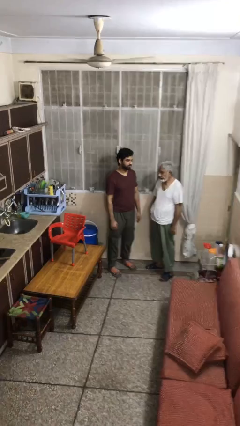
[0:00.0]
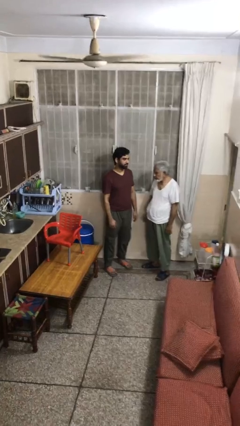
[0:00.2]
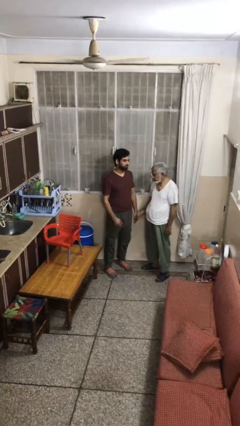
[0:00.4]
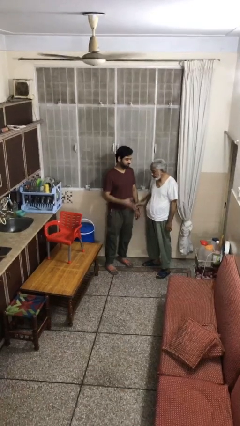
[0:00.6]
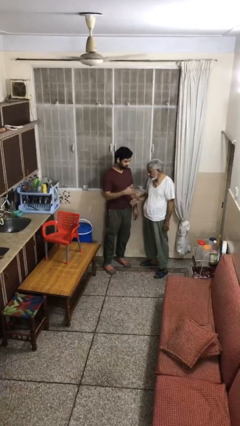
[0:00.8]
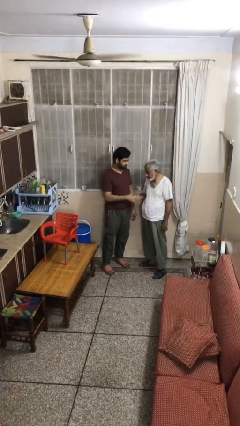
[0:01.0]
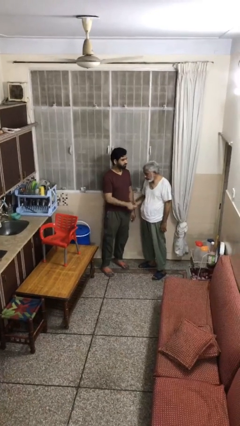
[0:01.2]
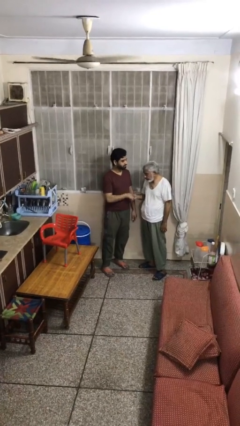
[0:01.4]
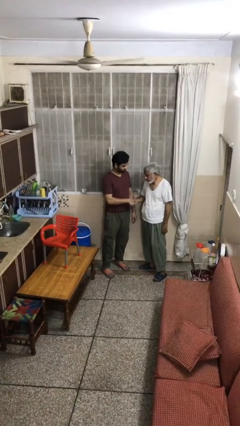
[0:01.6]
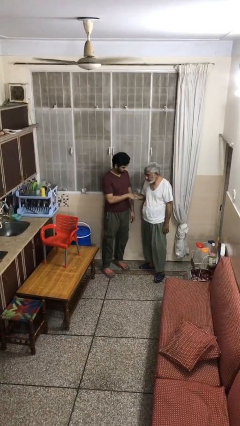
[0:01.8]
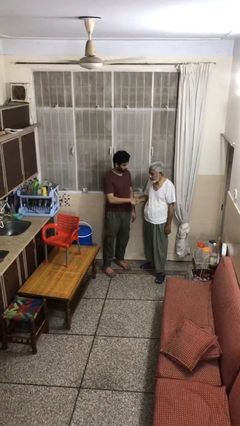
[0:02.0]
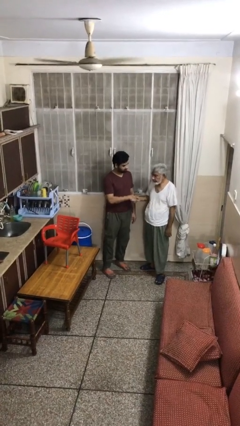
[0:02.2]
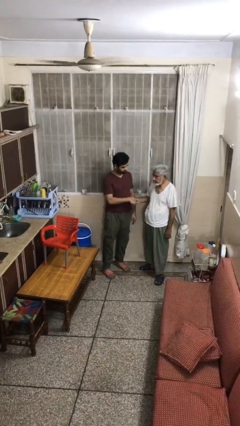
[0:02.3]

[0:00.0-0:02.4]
person shakes hand

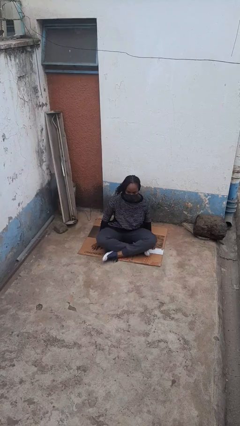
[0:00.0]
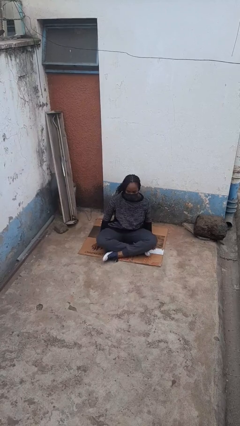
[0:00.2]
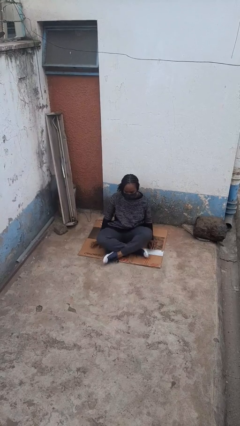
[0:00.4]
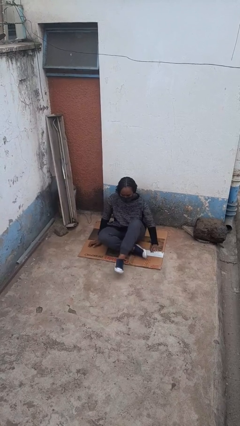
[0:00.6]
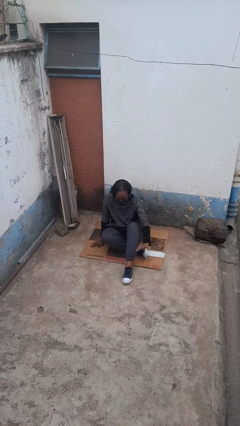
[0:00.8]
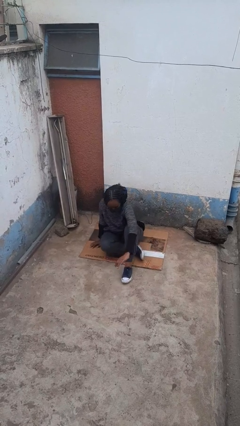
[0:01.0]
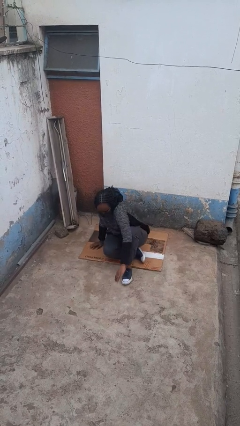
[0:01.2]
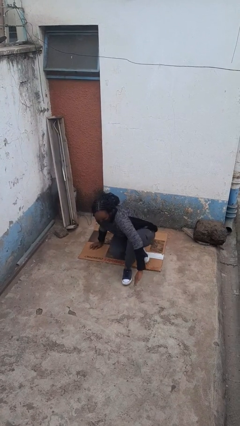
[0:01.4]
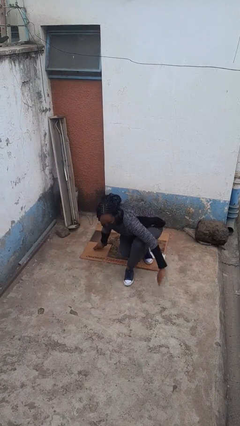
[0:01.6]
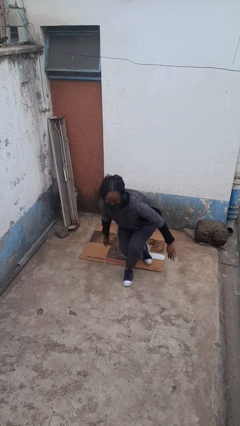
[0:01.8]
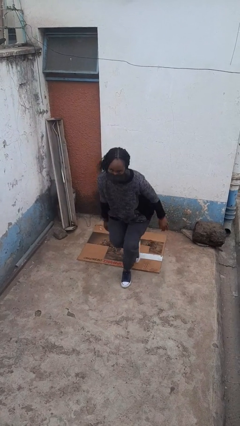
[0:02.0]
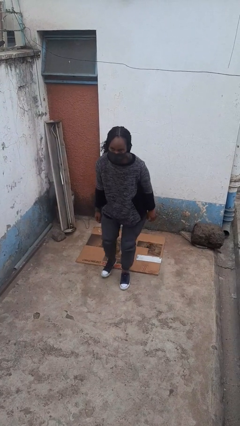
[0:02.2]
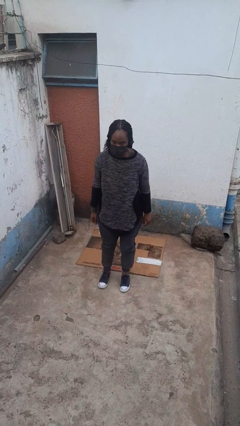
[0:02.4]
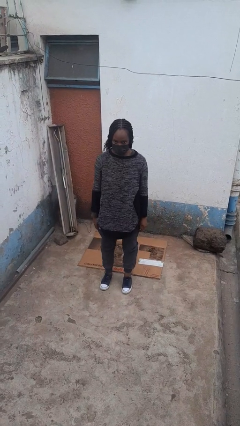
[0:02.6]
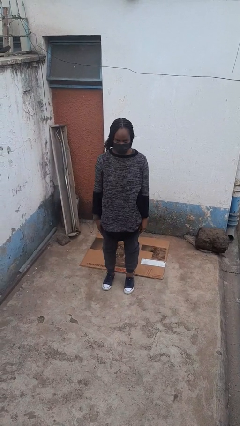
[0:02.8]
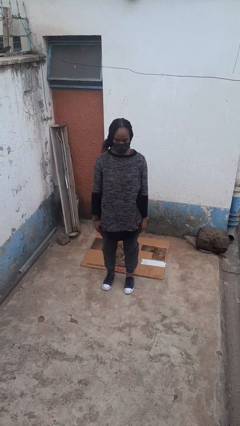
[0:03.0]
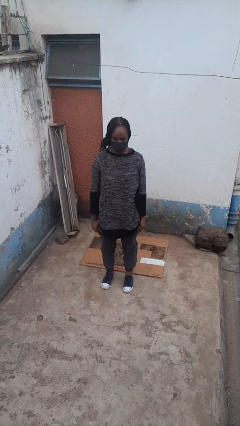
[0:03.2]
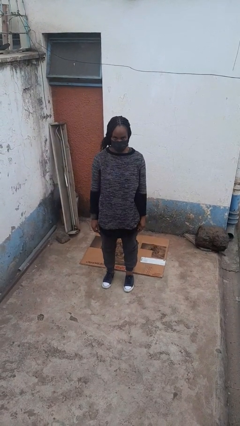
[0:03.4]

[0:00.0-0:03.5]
person stands up from floor

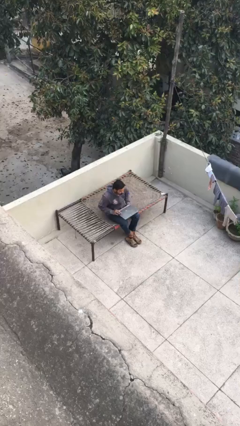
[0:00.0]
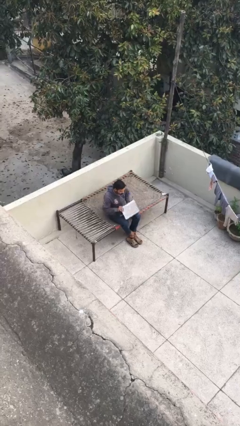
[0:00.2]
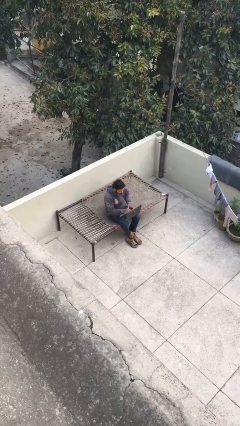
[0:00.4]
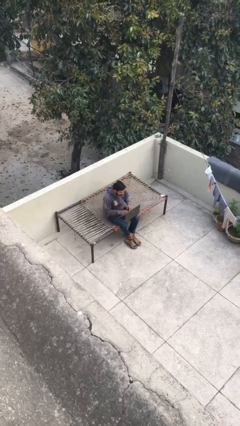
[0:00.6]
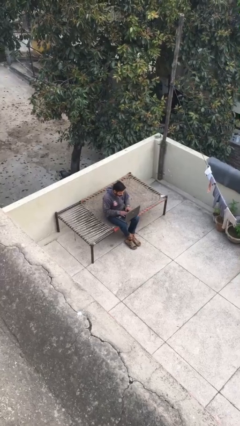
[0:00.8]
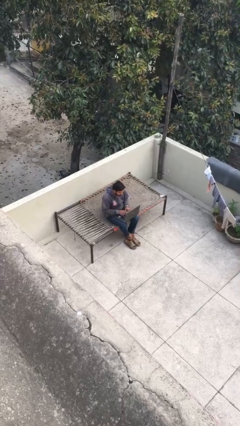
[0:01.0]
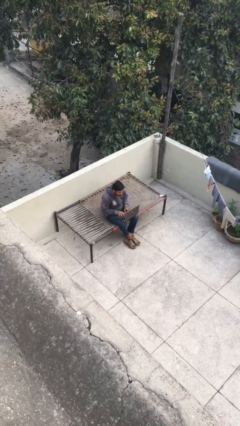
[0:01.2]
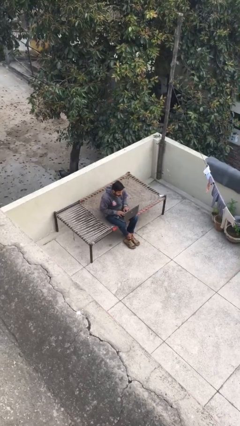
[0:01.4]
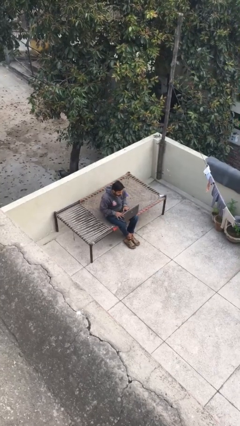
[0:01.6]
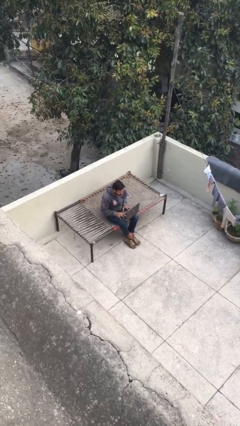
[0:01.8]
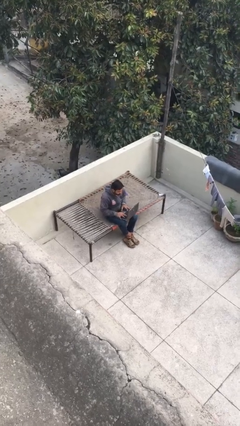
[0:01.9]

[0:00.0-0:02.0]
person interacts with laptop

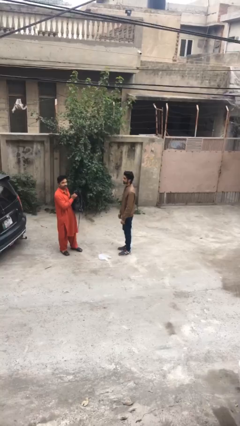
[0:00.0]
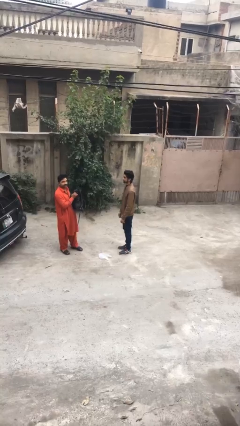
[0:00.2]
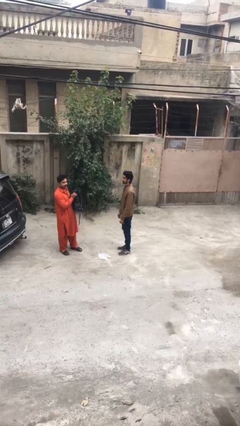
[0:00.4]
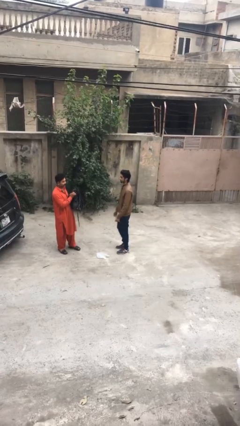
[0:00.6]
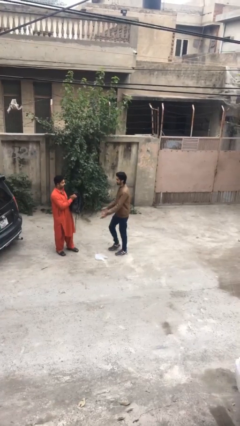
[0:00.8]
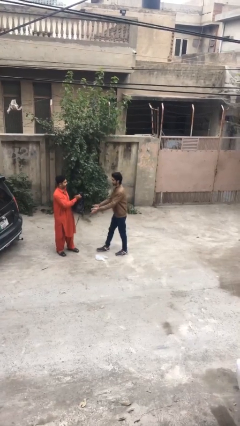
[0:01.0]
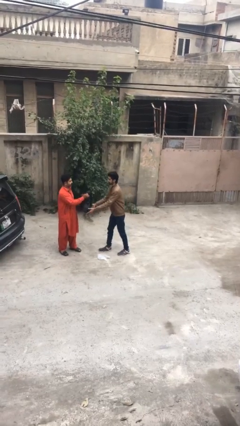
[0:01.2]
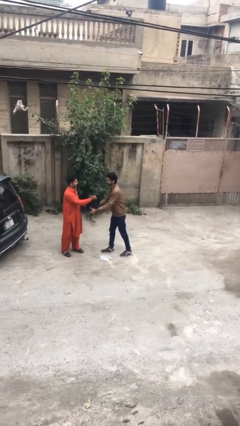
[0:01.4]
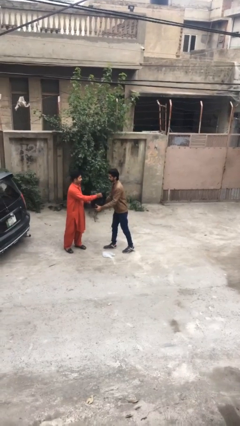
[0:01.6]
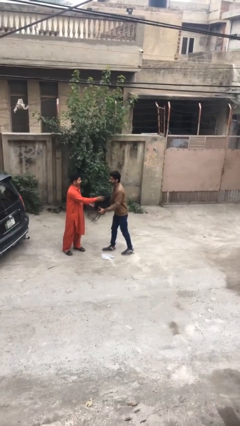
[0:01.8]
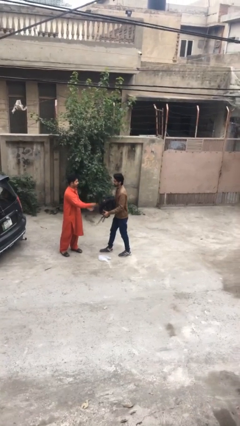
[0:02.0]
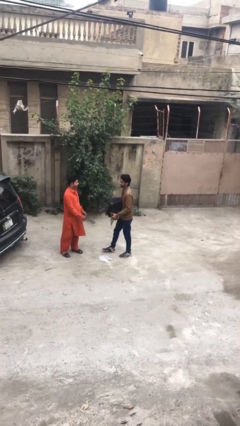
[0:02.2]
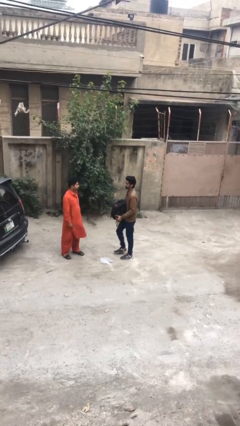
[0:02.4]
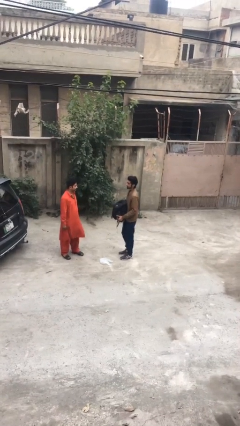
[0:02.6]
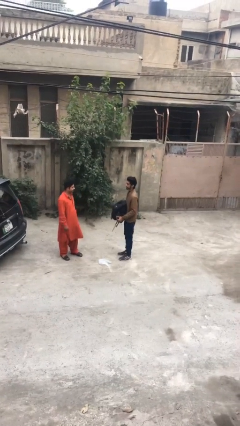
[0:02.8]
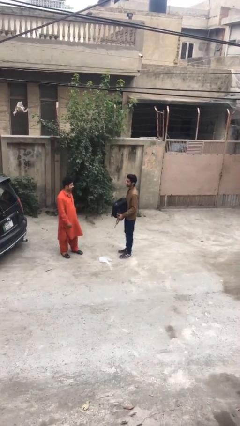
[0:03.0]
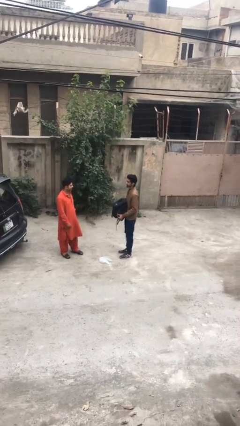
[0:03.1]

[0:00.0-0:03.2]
person transfers object to person

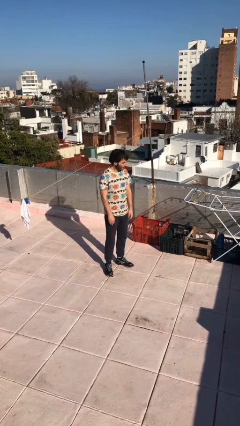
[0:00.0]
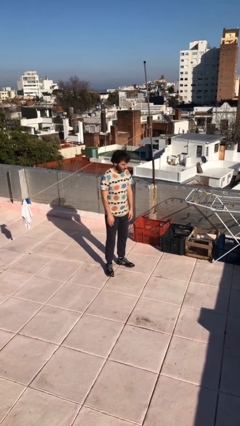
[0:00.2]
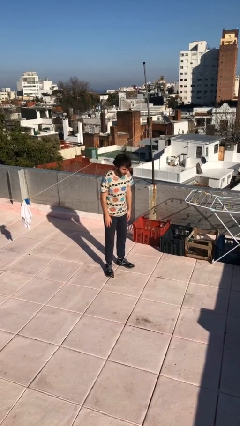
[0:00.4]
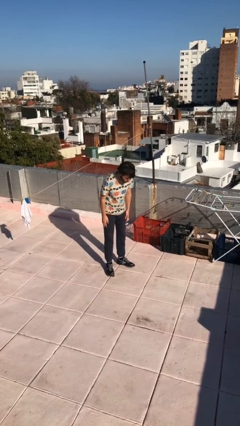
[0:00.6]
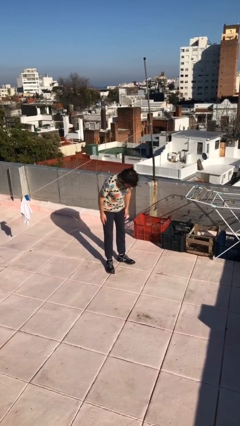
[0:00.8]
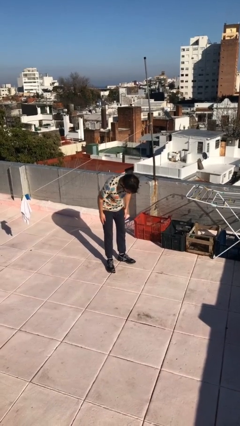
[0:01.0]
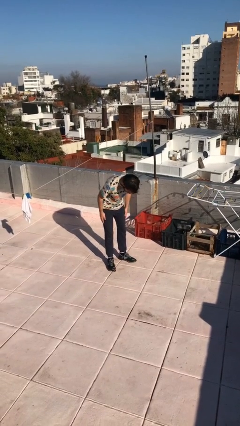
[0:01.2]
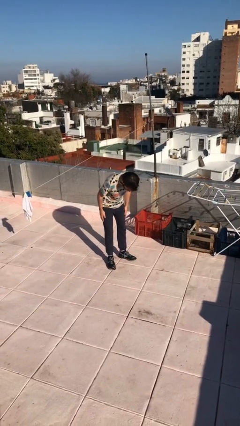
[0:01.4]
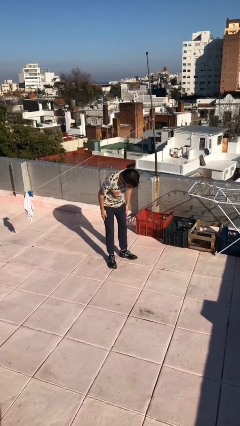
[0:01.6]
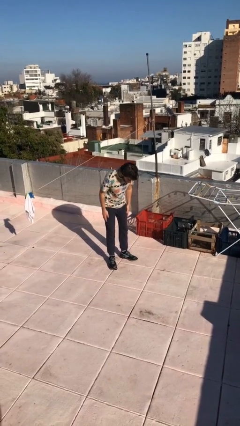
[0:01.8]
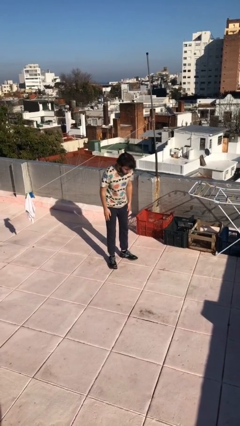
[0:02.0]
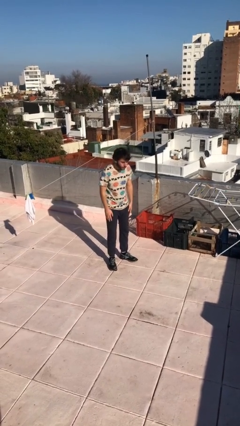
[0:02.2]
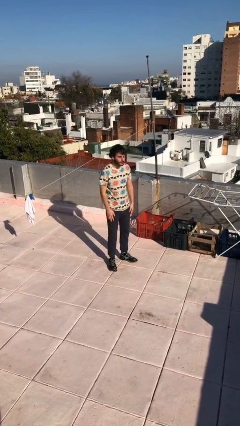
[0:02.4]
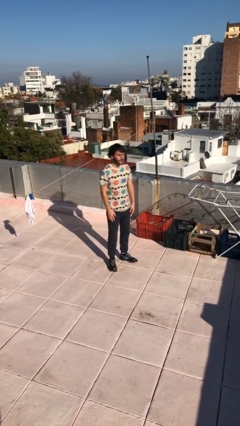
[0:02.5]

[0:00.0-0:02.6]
person bows

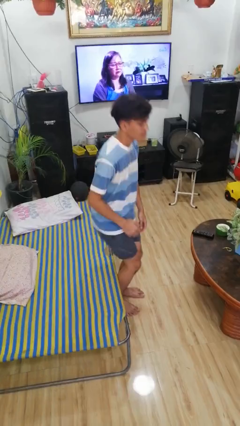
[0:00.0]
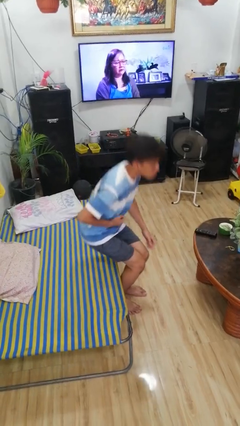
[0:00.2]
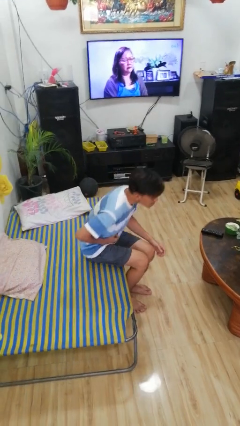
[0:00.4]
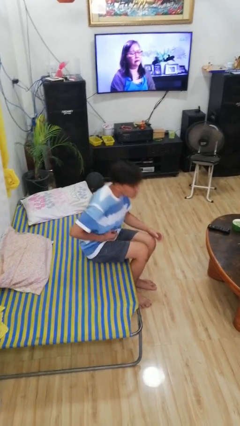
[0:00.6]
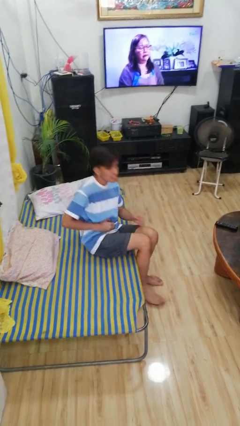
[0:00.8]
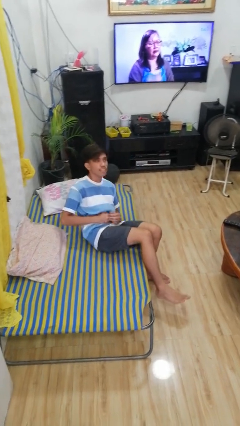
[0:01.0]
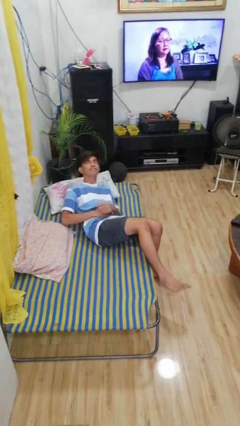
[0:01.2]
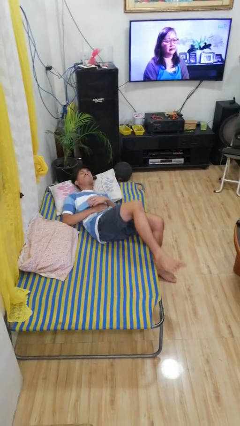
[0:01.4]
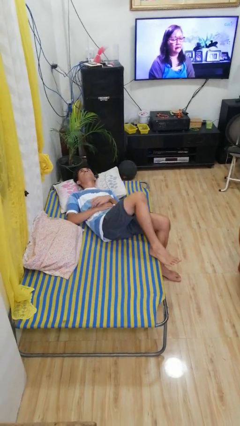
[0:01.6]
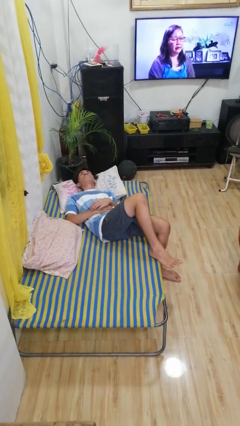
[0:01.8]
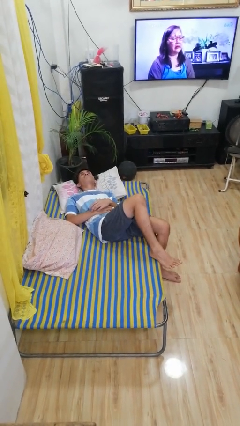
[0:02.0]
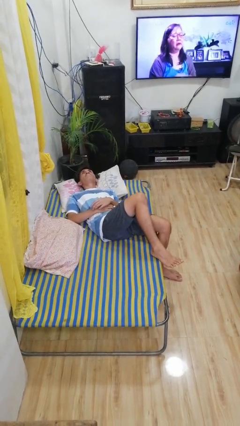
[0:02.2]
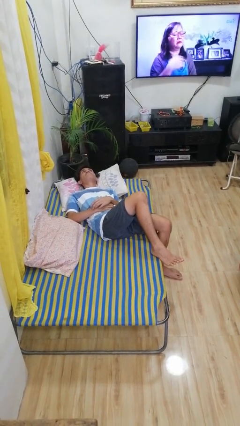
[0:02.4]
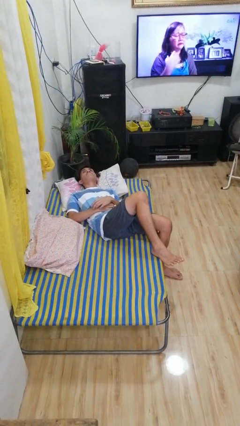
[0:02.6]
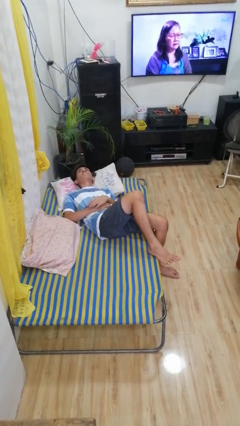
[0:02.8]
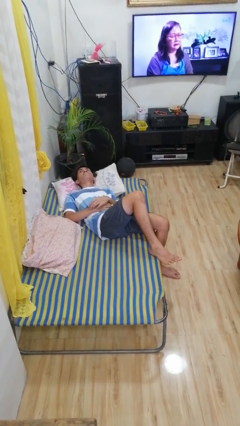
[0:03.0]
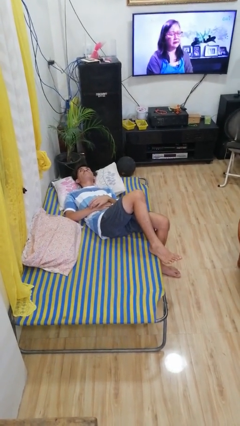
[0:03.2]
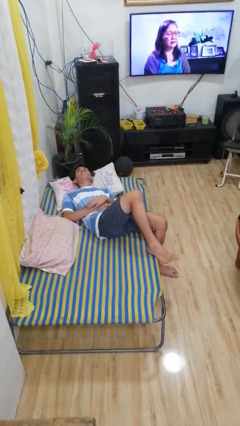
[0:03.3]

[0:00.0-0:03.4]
person lies down on bed

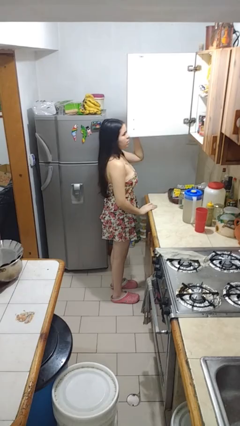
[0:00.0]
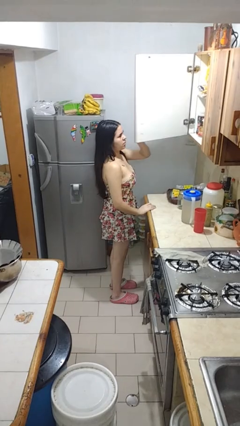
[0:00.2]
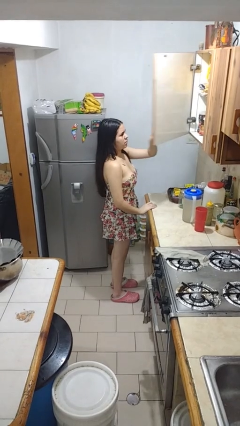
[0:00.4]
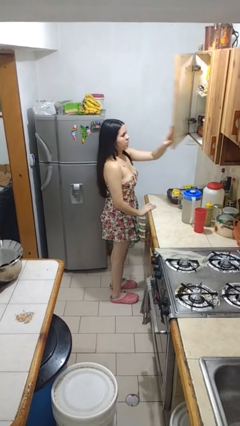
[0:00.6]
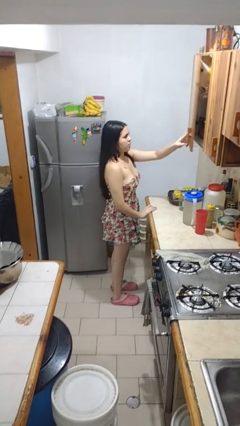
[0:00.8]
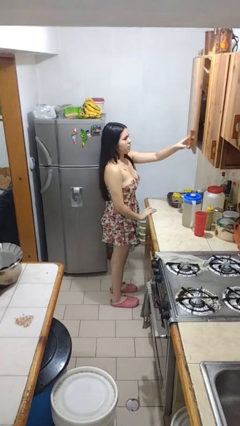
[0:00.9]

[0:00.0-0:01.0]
person closes cabinet
